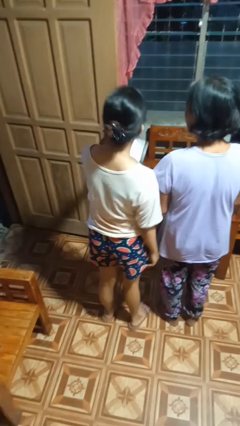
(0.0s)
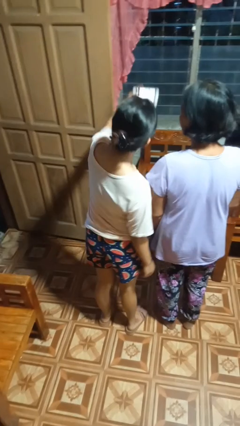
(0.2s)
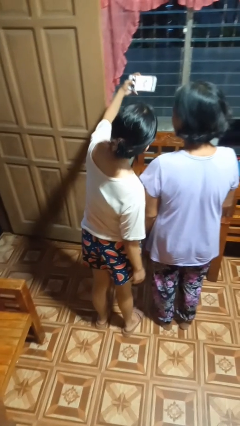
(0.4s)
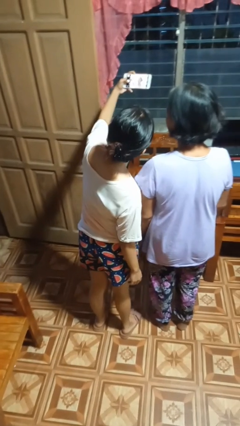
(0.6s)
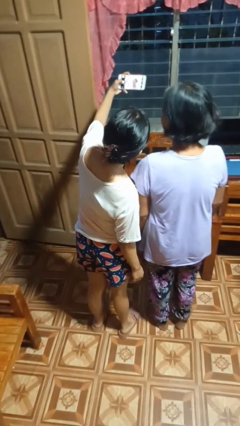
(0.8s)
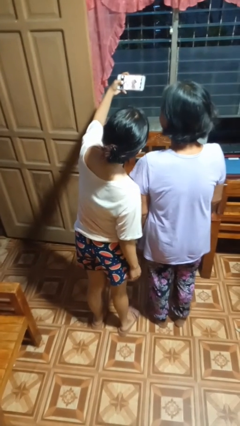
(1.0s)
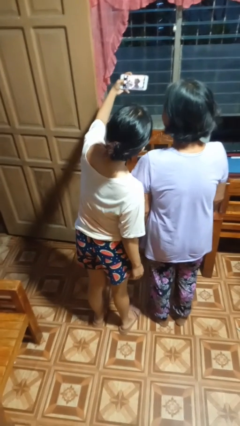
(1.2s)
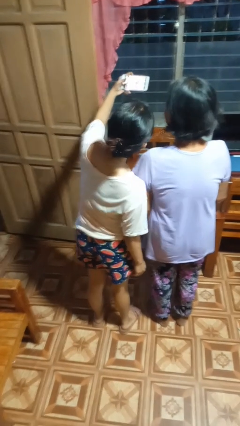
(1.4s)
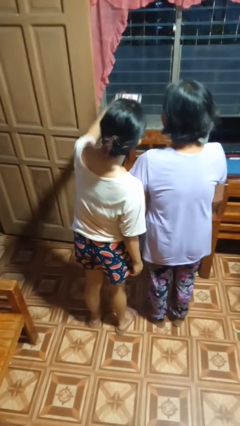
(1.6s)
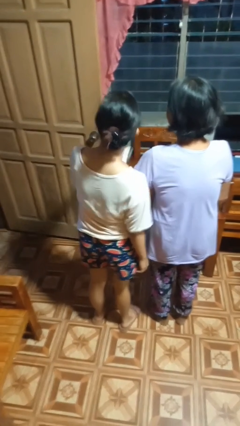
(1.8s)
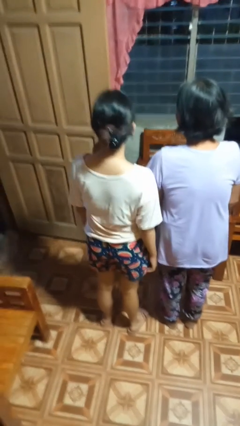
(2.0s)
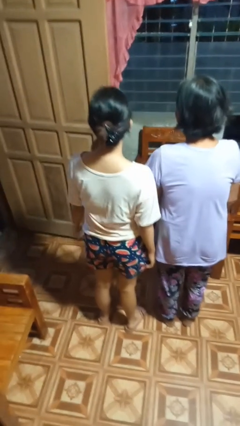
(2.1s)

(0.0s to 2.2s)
person takes selfie with person

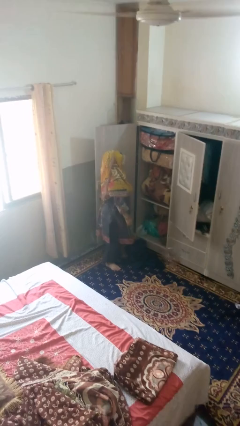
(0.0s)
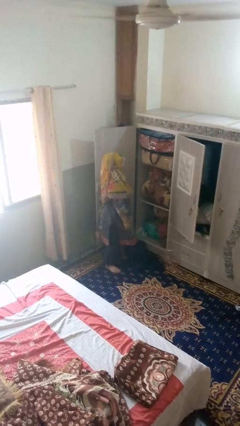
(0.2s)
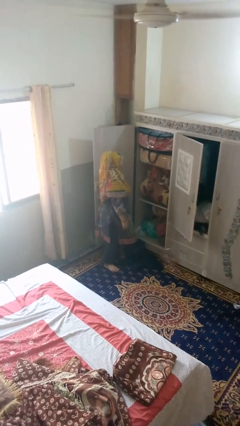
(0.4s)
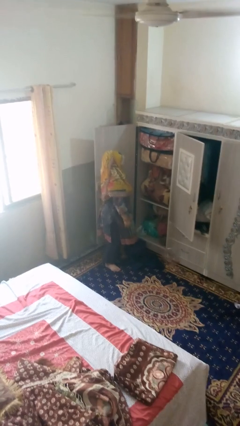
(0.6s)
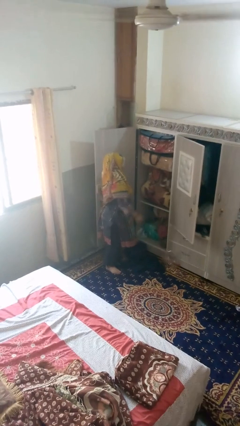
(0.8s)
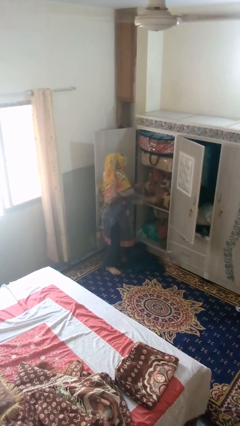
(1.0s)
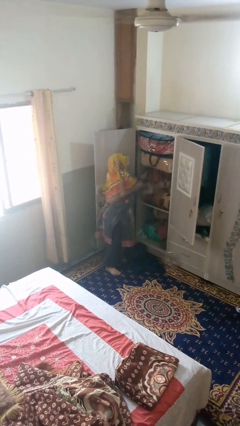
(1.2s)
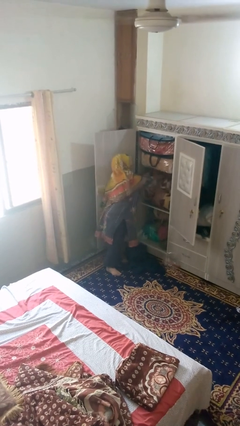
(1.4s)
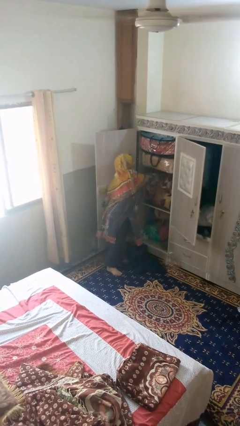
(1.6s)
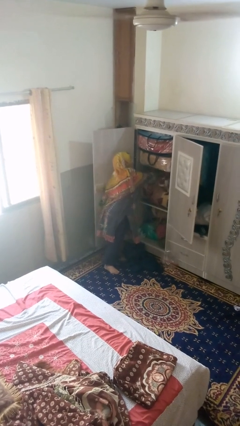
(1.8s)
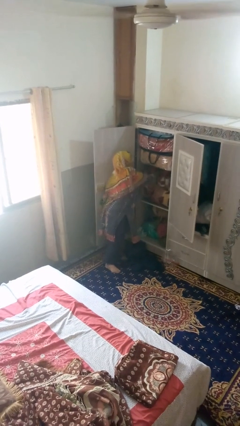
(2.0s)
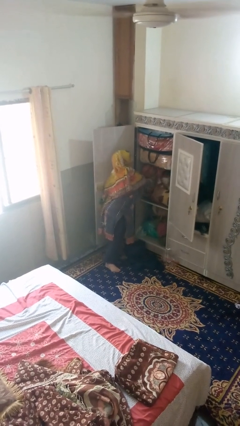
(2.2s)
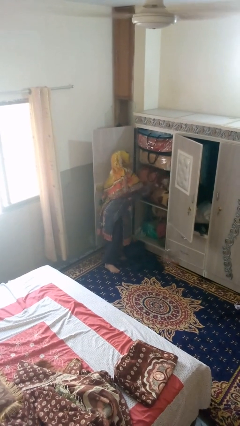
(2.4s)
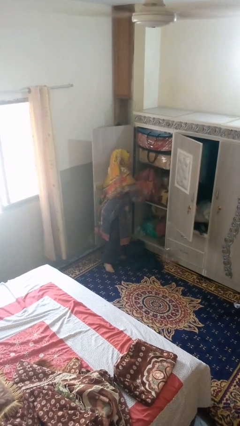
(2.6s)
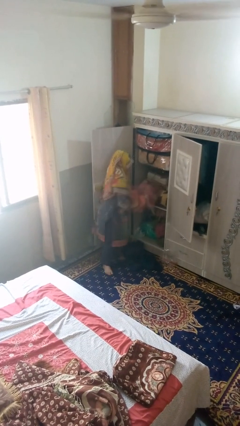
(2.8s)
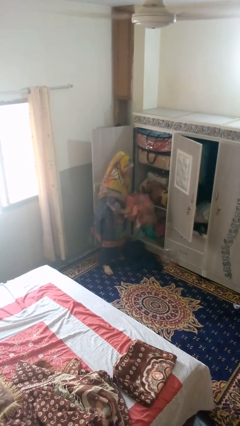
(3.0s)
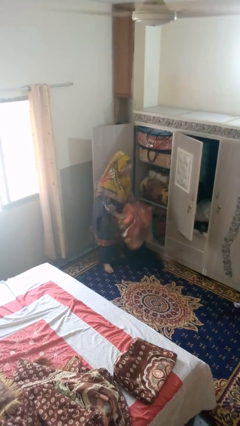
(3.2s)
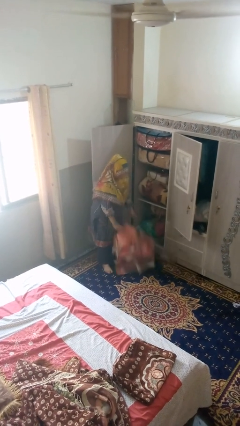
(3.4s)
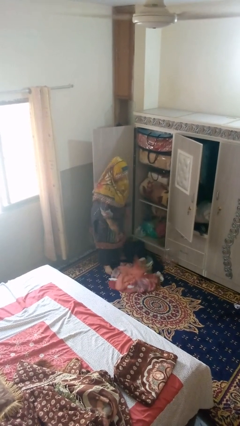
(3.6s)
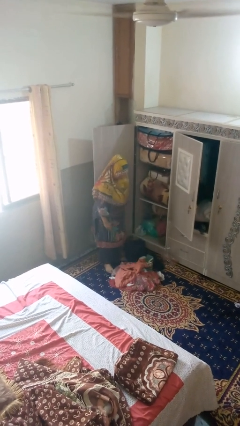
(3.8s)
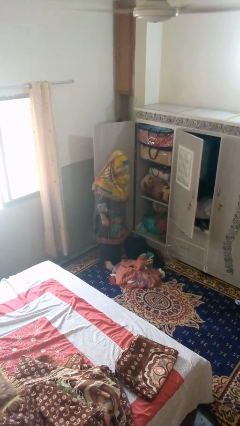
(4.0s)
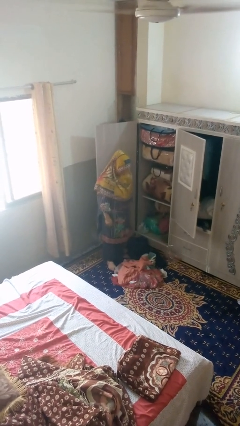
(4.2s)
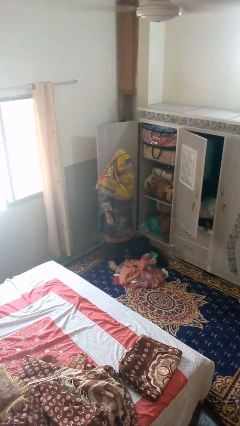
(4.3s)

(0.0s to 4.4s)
person puts clothes into dresser

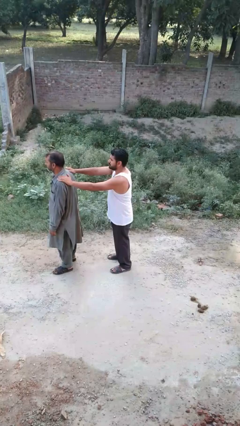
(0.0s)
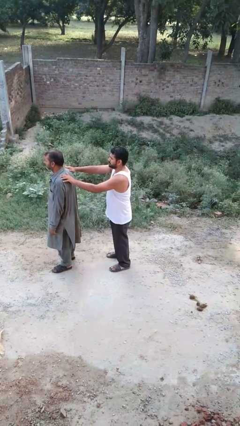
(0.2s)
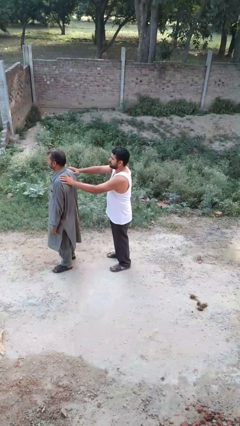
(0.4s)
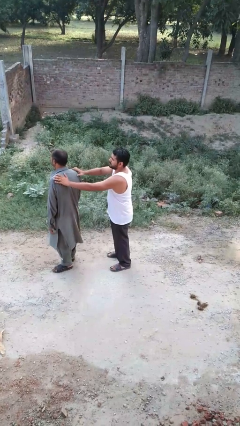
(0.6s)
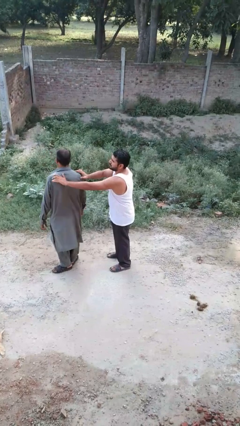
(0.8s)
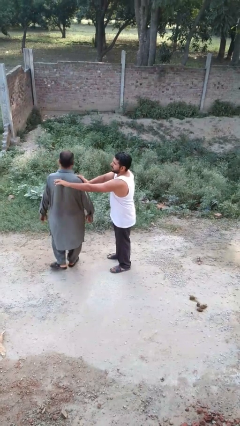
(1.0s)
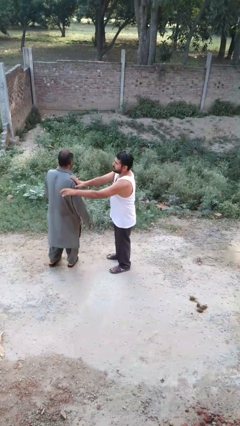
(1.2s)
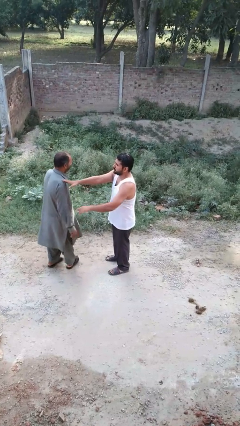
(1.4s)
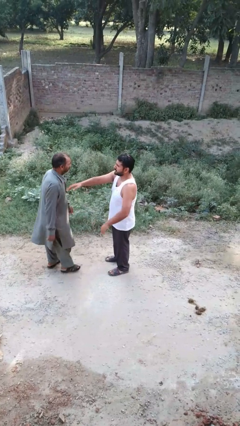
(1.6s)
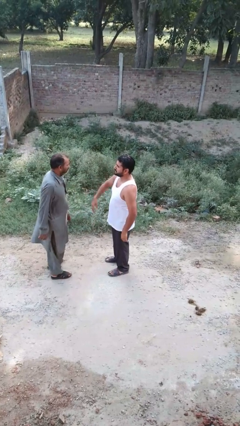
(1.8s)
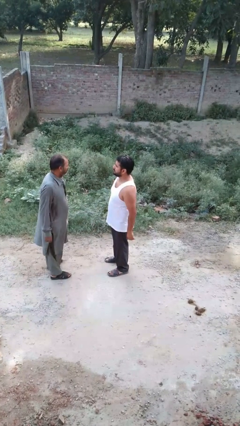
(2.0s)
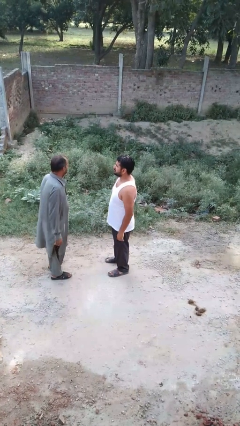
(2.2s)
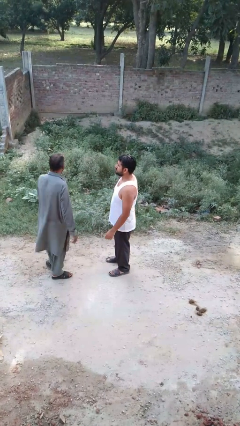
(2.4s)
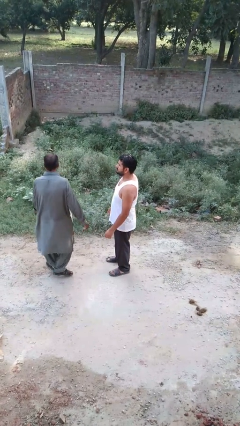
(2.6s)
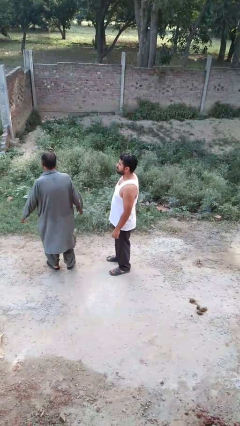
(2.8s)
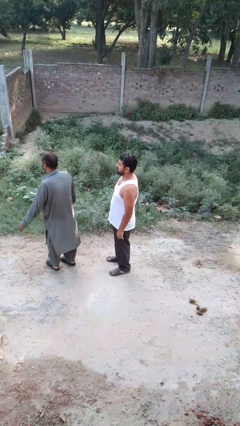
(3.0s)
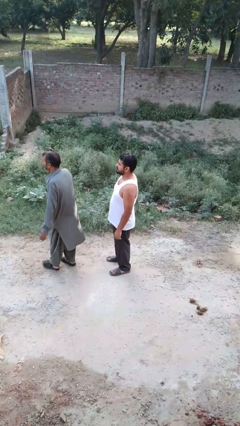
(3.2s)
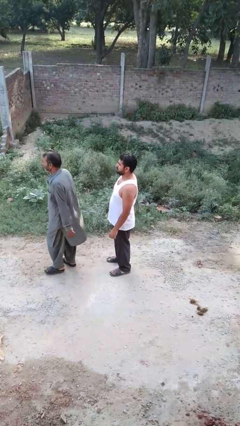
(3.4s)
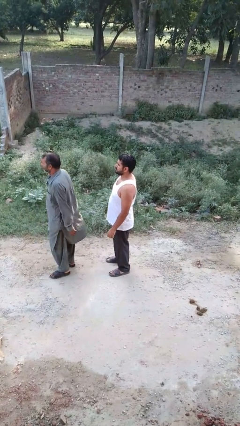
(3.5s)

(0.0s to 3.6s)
person spins person around

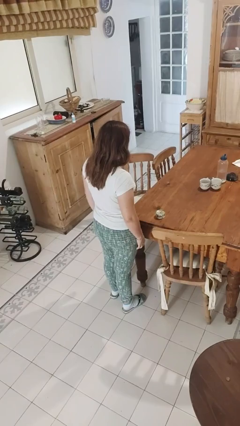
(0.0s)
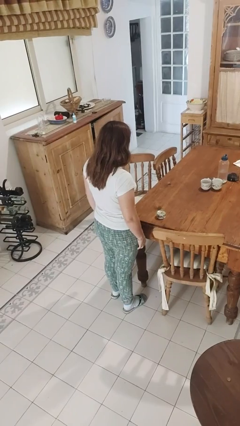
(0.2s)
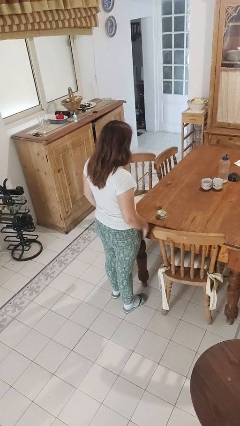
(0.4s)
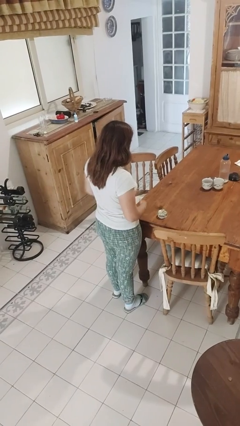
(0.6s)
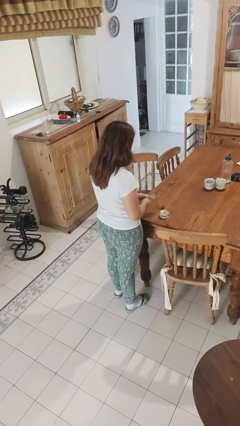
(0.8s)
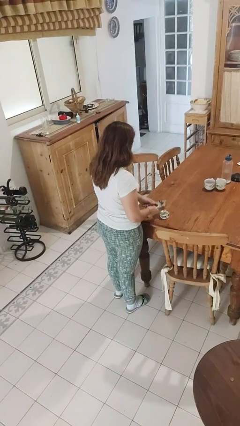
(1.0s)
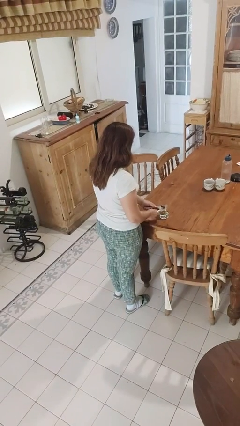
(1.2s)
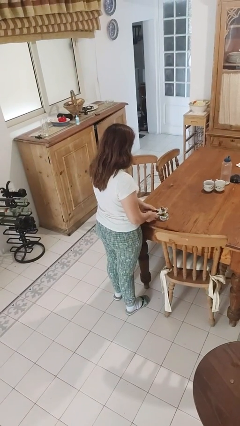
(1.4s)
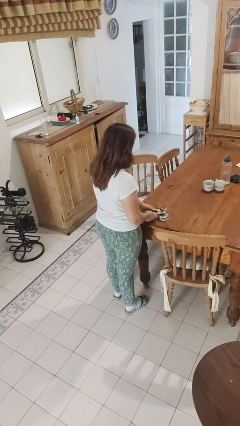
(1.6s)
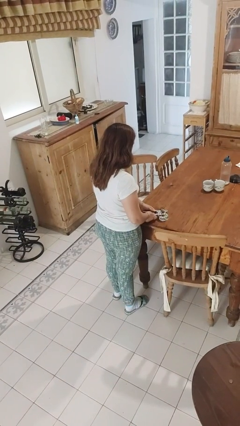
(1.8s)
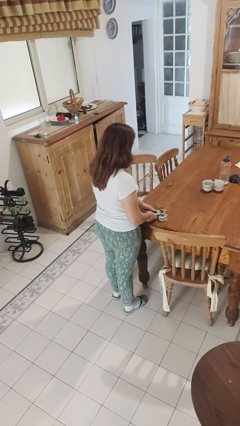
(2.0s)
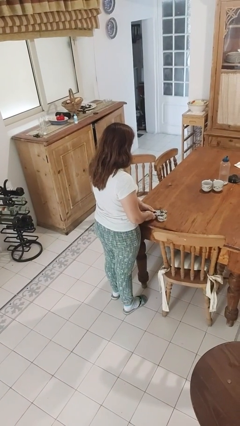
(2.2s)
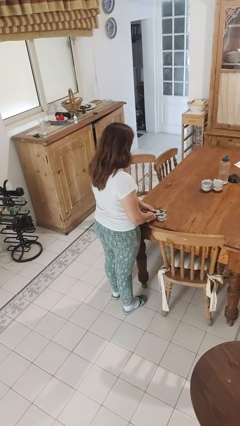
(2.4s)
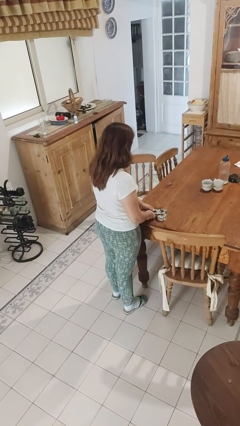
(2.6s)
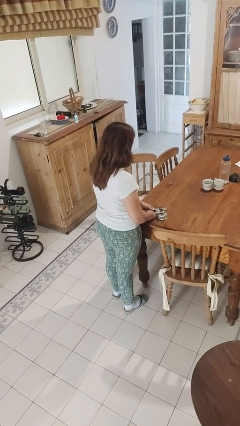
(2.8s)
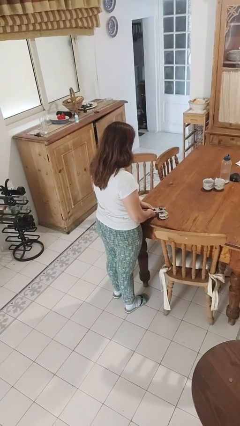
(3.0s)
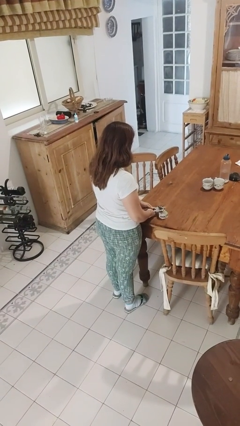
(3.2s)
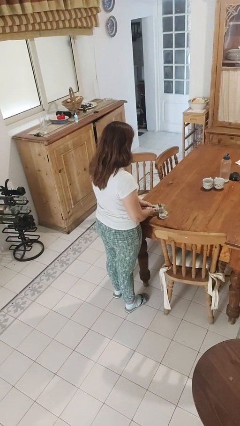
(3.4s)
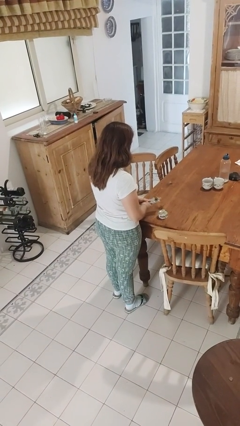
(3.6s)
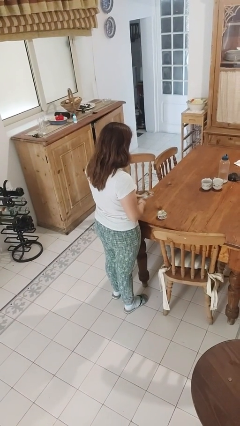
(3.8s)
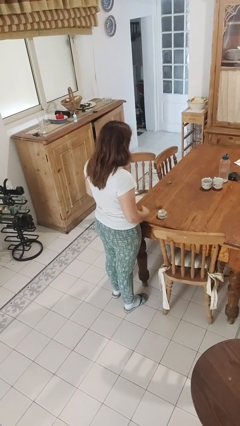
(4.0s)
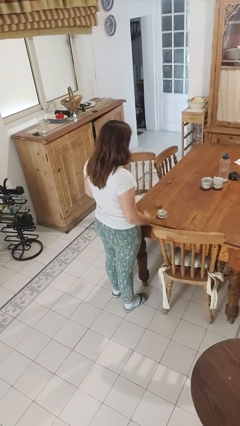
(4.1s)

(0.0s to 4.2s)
person opens can with can opener

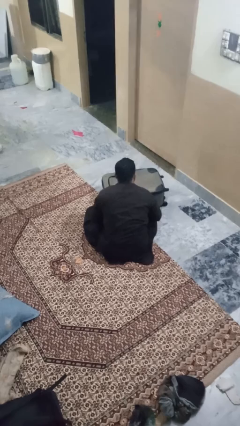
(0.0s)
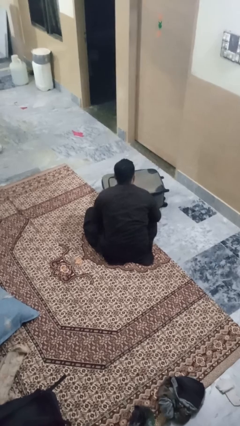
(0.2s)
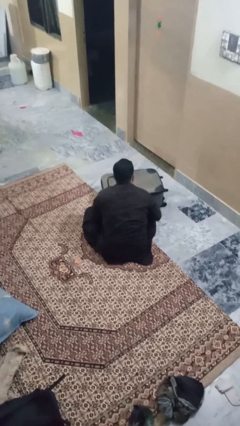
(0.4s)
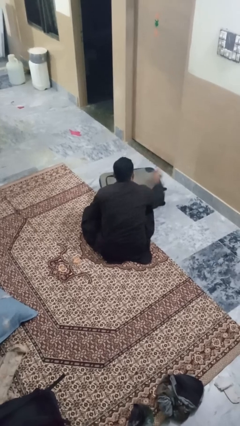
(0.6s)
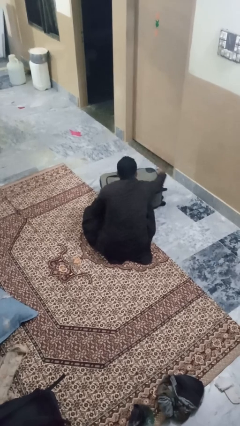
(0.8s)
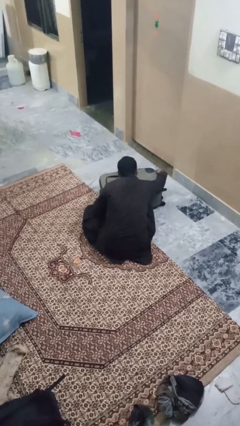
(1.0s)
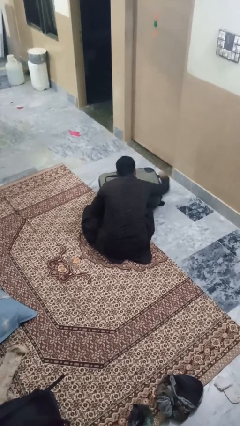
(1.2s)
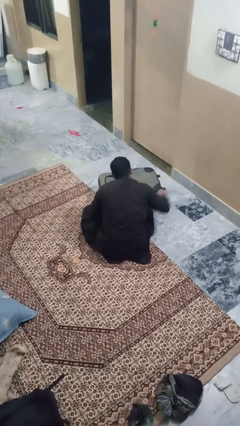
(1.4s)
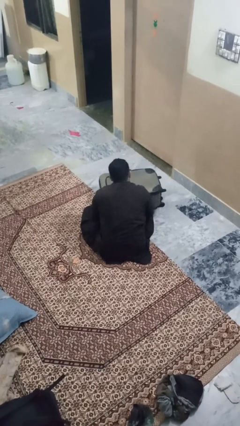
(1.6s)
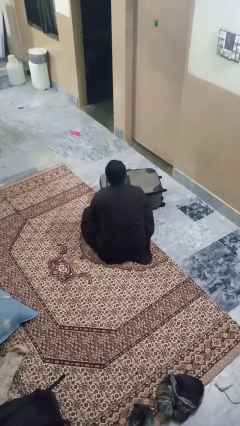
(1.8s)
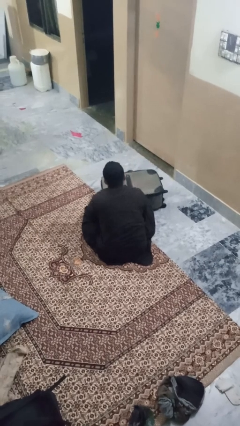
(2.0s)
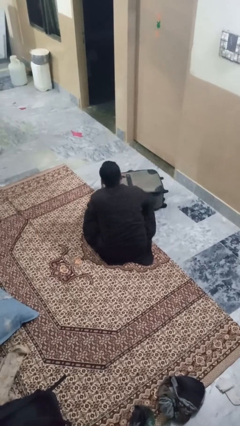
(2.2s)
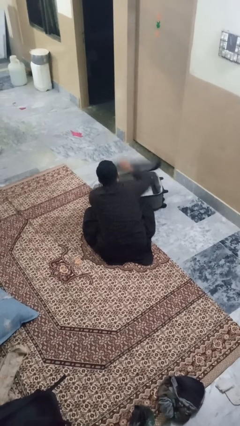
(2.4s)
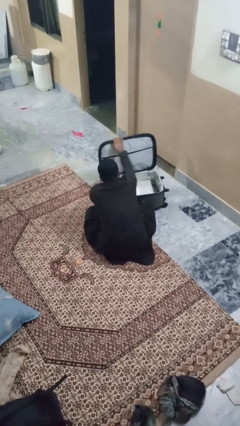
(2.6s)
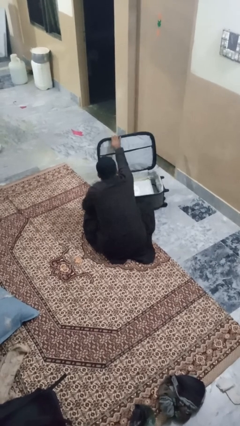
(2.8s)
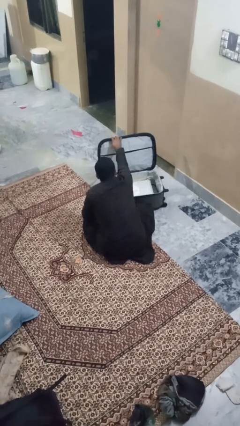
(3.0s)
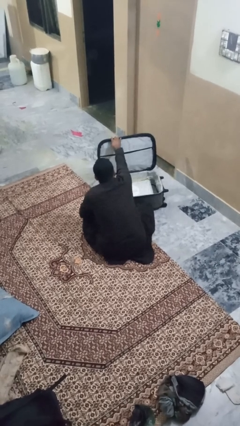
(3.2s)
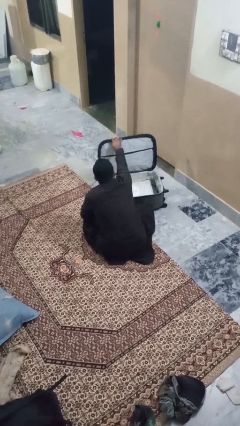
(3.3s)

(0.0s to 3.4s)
person opens suitcase
